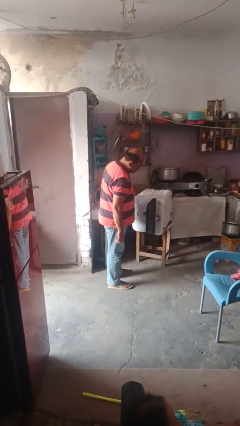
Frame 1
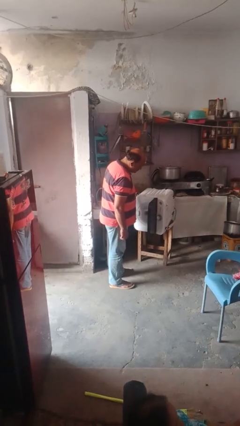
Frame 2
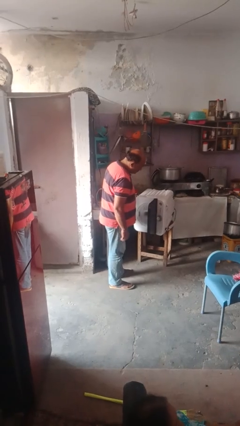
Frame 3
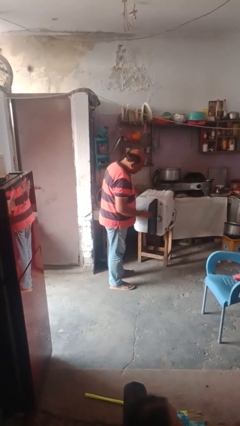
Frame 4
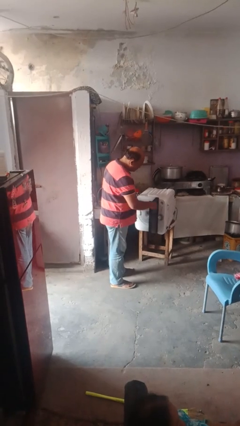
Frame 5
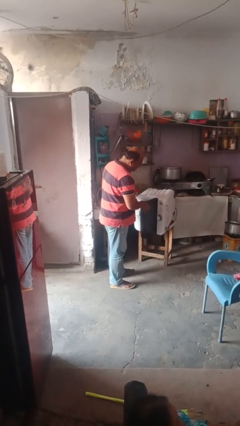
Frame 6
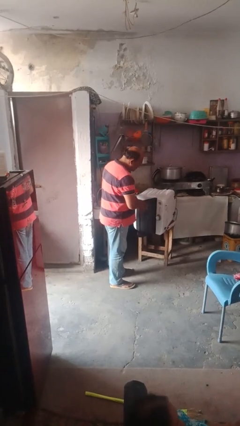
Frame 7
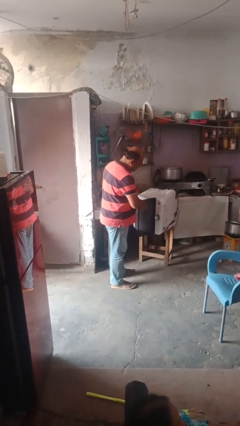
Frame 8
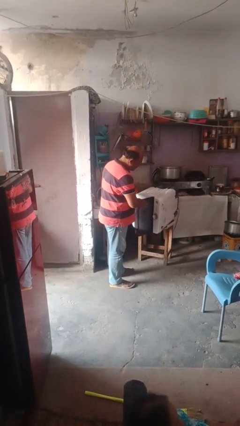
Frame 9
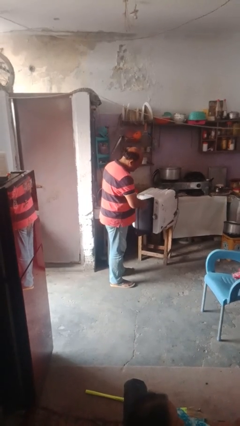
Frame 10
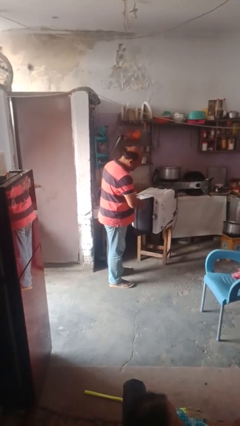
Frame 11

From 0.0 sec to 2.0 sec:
person closes dishwasher

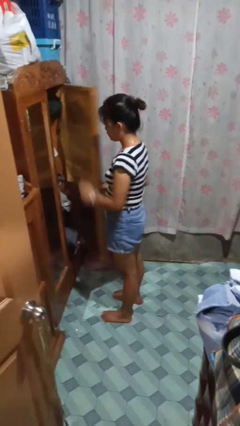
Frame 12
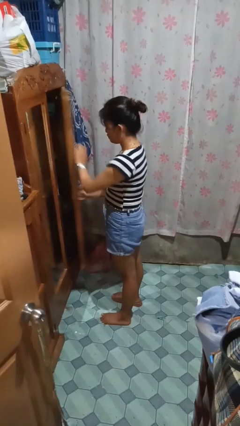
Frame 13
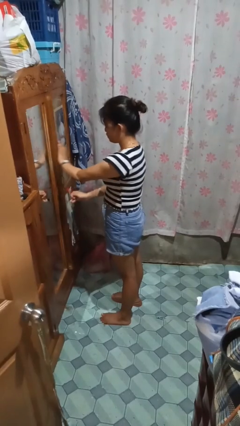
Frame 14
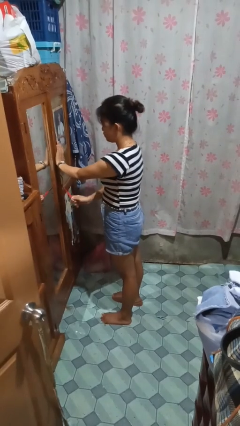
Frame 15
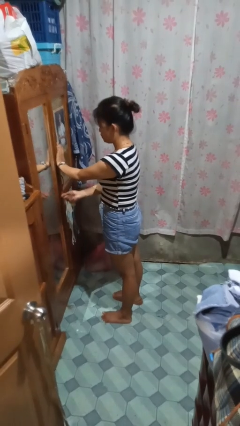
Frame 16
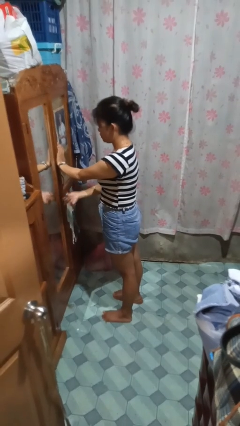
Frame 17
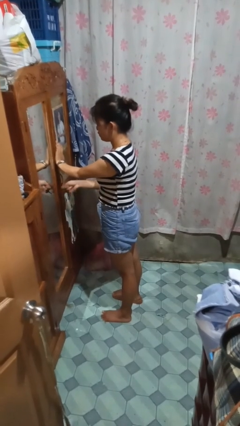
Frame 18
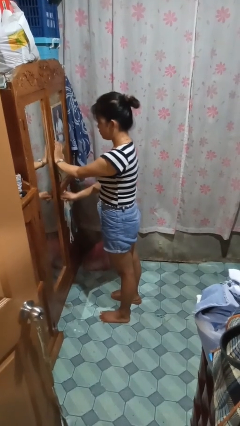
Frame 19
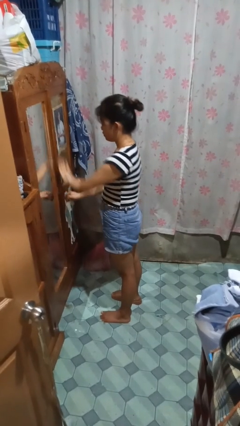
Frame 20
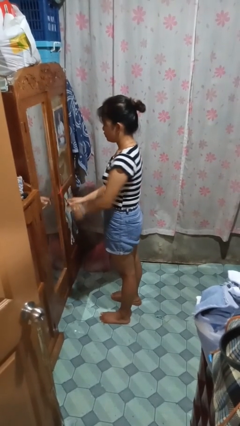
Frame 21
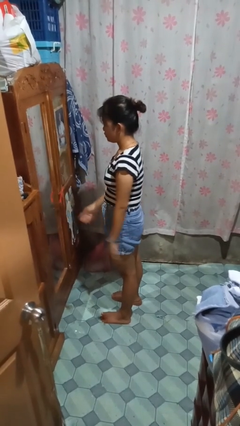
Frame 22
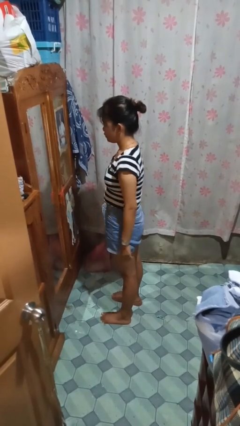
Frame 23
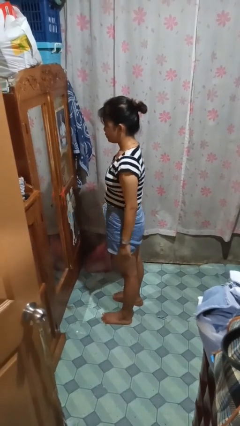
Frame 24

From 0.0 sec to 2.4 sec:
person closes closet door

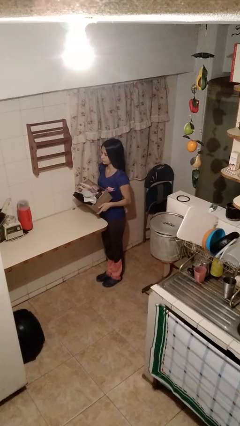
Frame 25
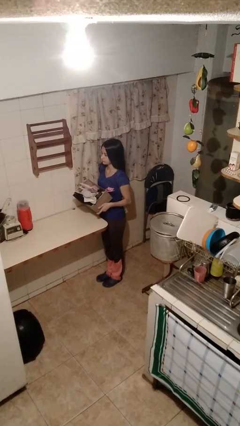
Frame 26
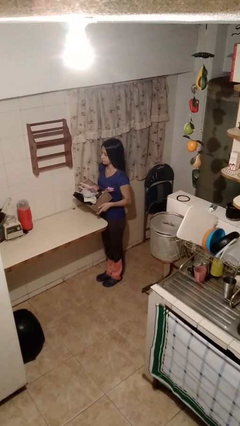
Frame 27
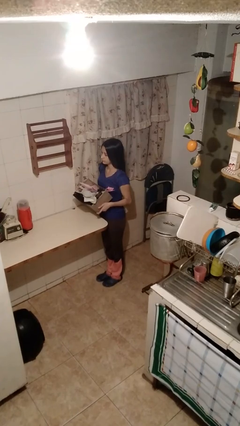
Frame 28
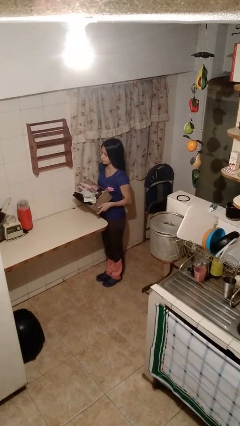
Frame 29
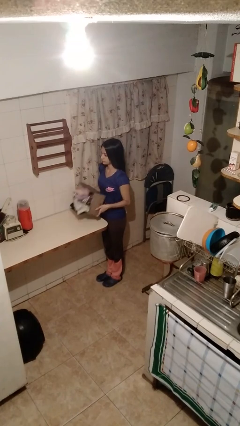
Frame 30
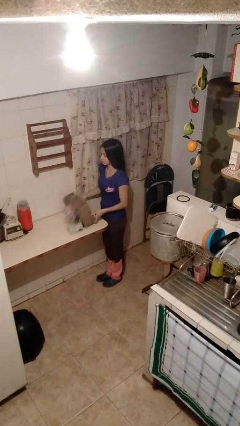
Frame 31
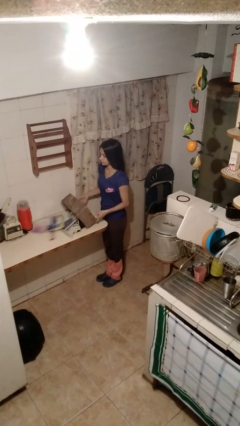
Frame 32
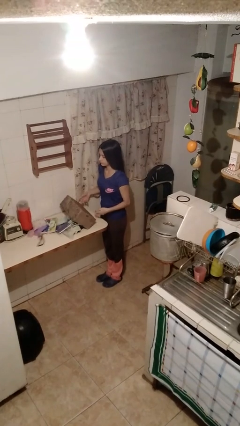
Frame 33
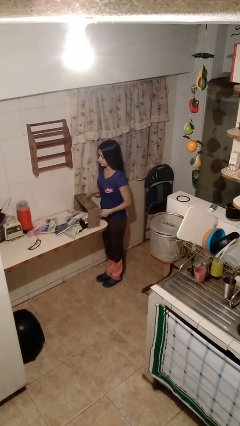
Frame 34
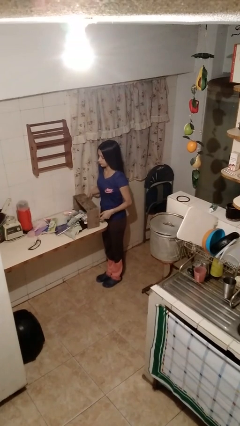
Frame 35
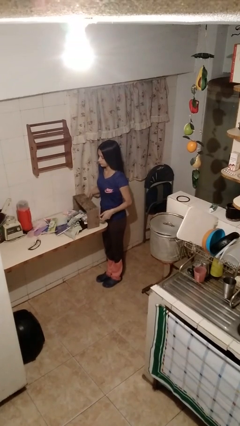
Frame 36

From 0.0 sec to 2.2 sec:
person unloads box onto table

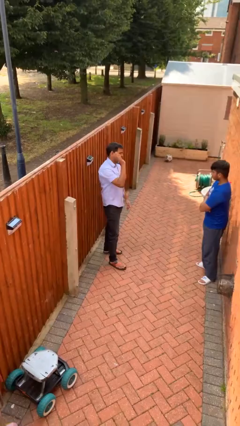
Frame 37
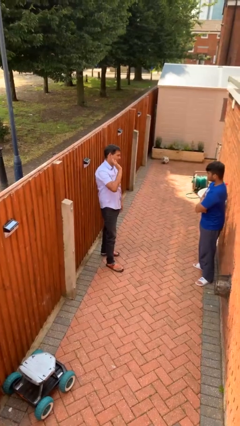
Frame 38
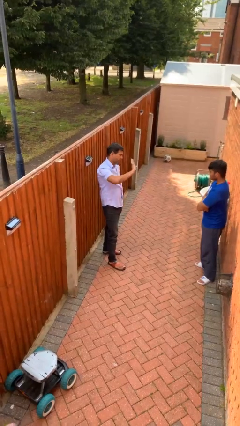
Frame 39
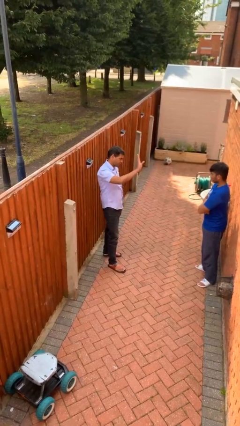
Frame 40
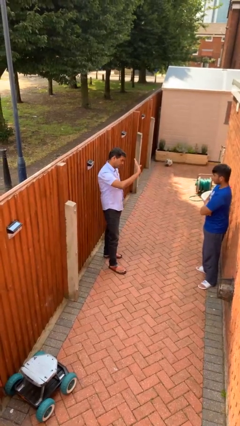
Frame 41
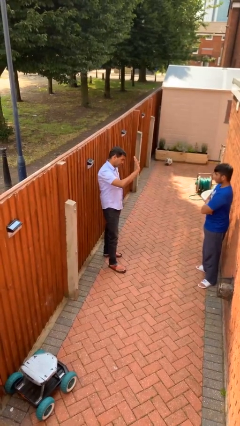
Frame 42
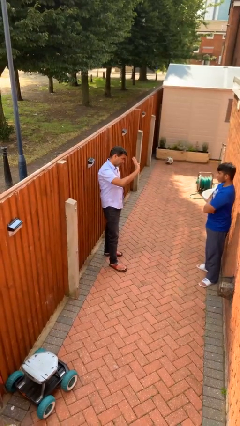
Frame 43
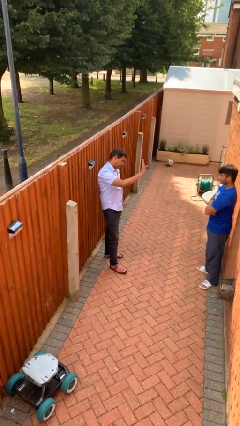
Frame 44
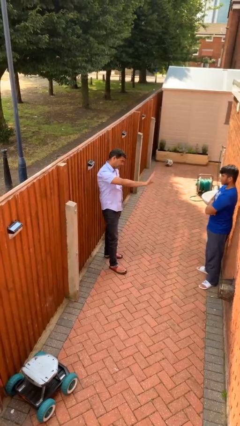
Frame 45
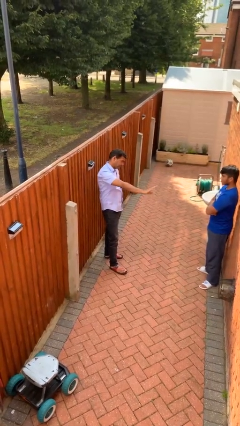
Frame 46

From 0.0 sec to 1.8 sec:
person waves at person

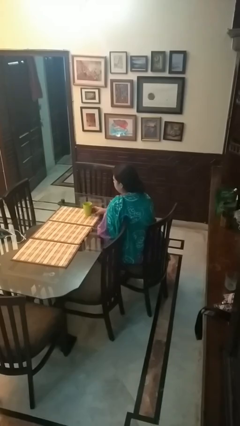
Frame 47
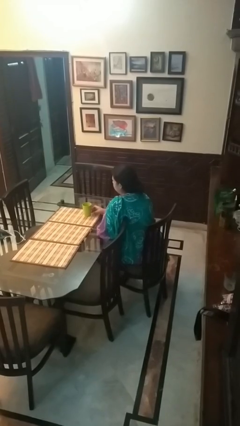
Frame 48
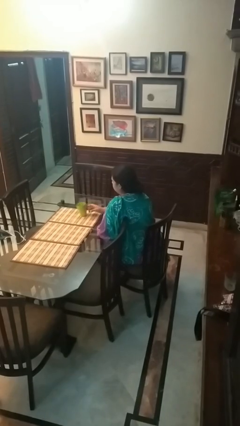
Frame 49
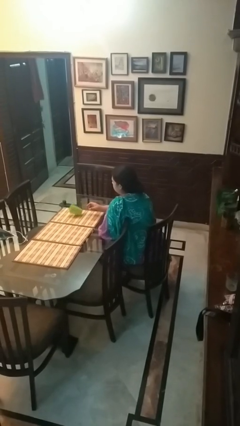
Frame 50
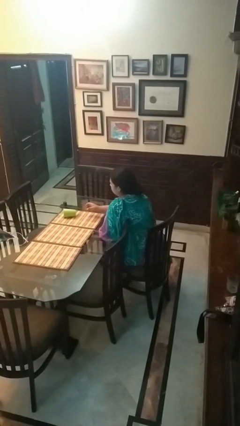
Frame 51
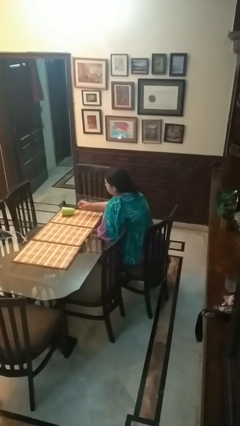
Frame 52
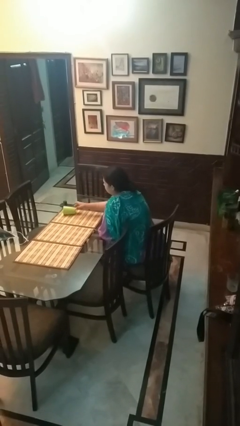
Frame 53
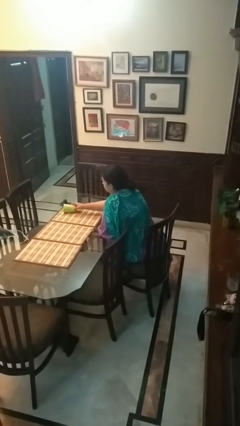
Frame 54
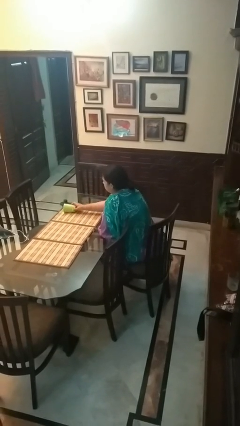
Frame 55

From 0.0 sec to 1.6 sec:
person knocks over glass

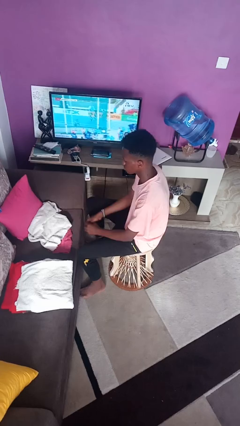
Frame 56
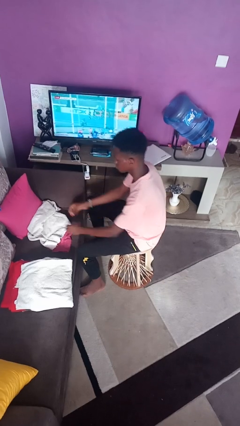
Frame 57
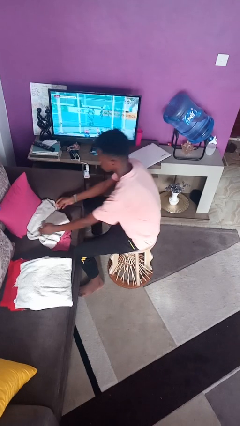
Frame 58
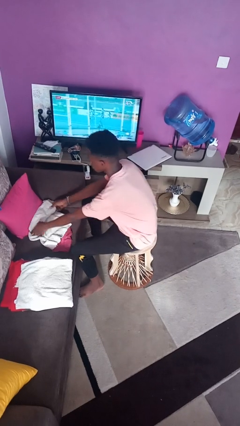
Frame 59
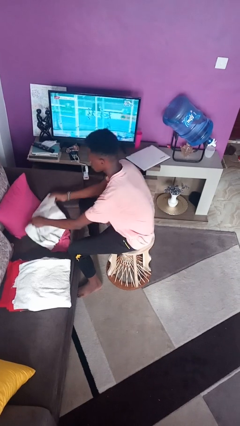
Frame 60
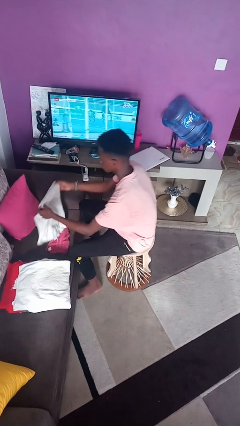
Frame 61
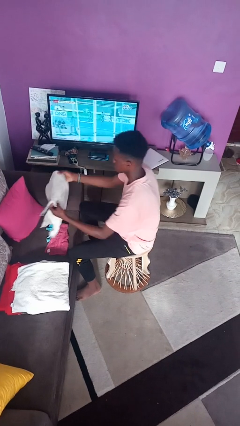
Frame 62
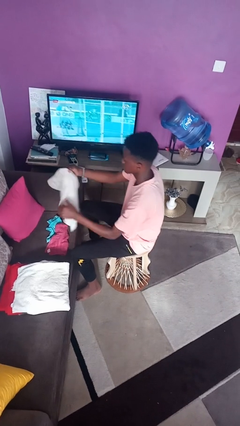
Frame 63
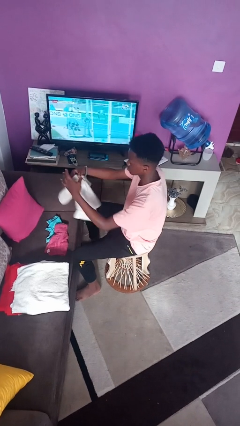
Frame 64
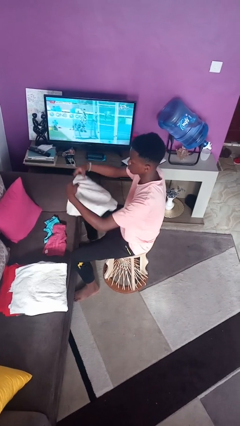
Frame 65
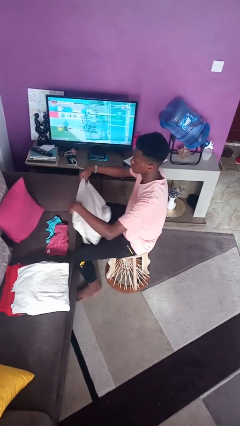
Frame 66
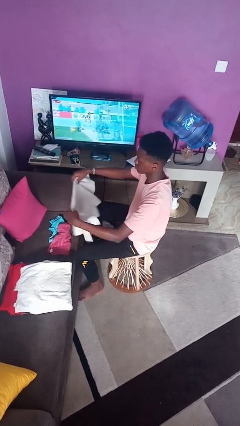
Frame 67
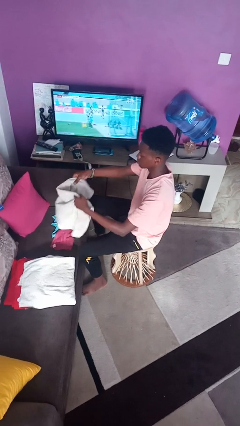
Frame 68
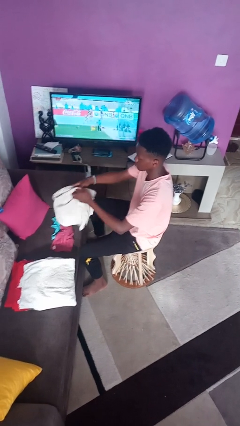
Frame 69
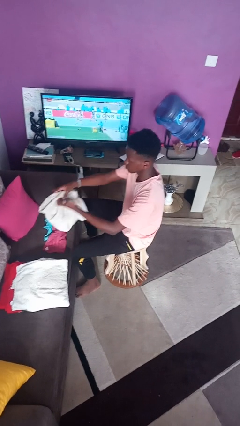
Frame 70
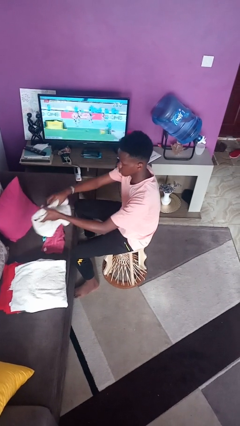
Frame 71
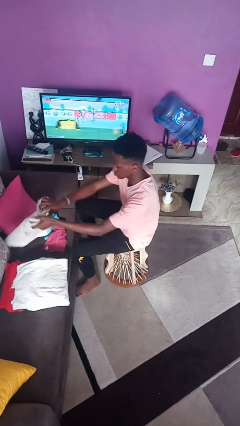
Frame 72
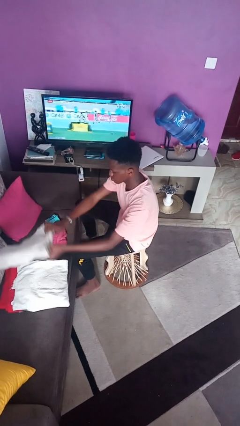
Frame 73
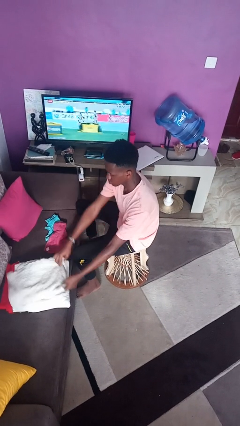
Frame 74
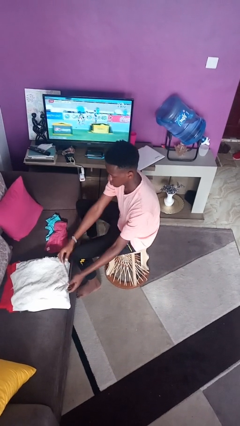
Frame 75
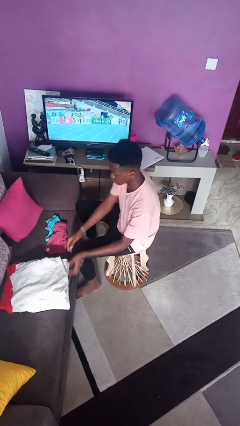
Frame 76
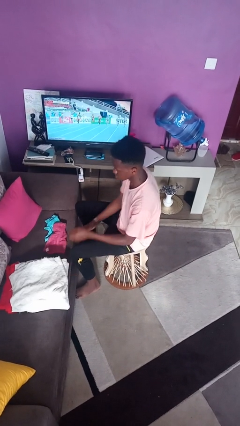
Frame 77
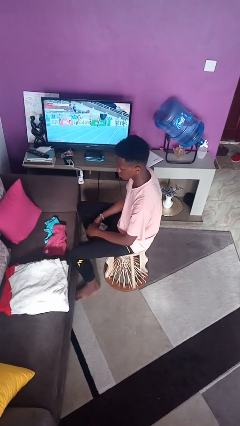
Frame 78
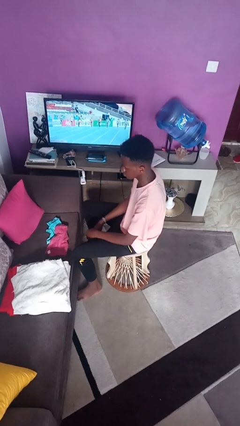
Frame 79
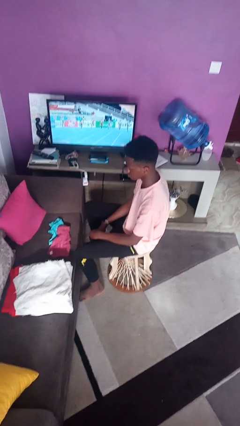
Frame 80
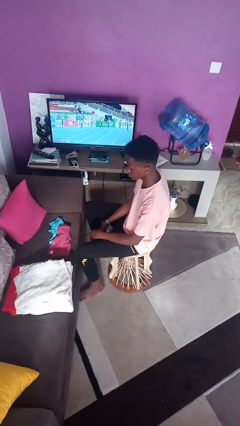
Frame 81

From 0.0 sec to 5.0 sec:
person folds towel

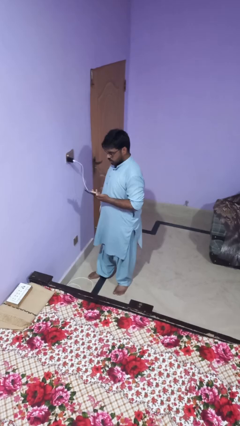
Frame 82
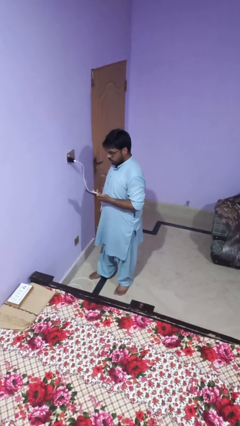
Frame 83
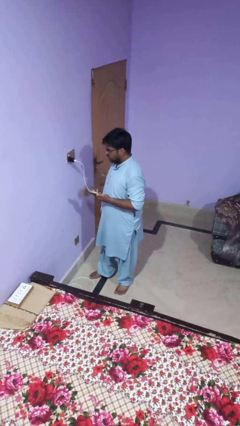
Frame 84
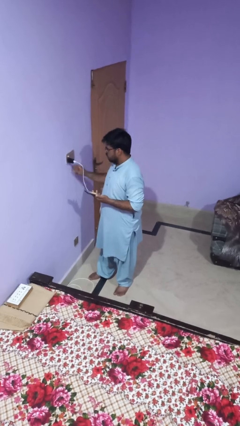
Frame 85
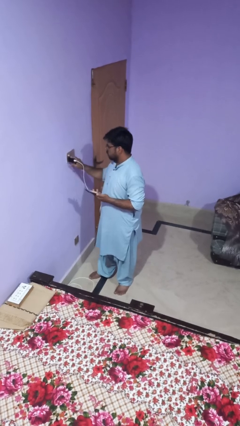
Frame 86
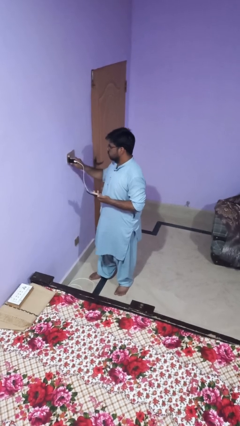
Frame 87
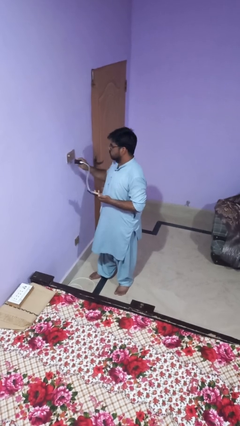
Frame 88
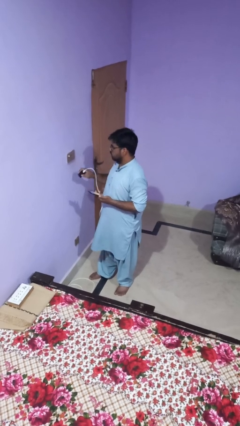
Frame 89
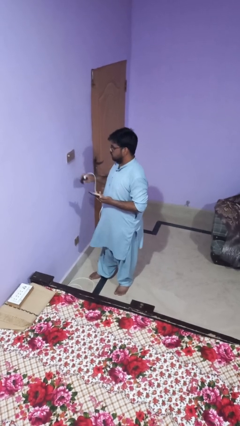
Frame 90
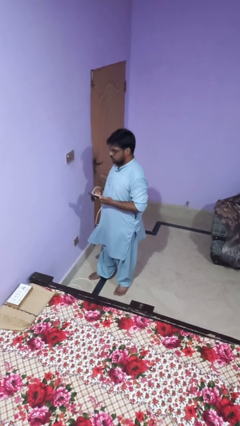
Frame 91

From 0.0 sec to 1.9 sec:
person unplugs from electrical socket

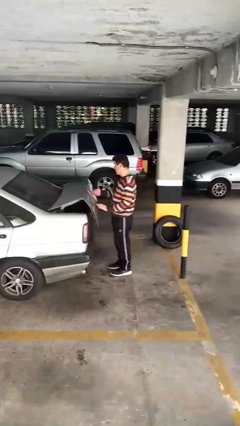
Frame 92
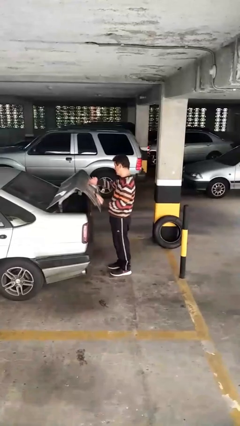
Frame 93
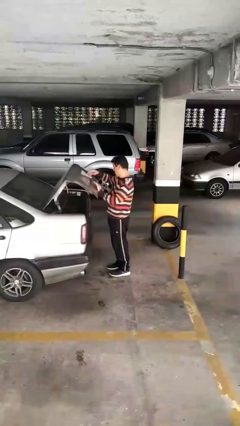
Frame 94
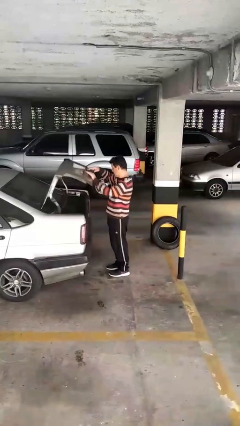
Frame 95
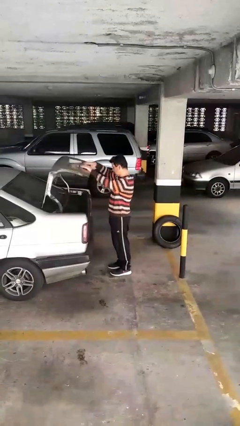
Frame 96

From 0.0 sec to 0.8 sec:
person opens car trunk
